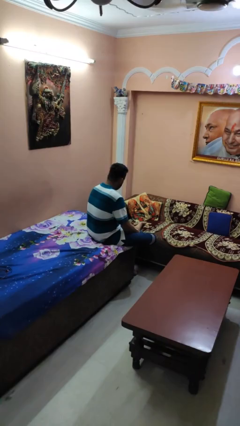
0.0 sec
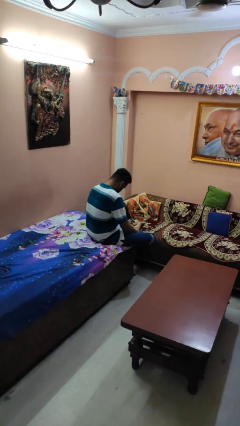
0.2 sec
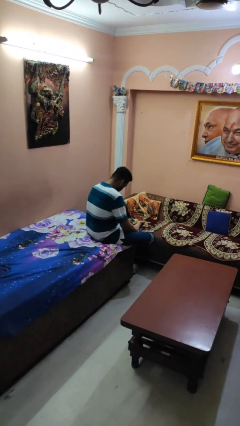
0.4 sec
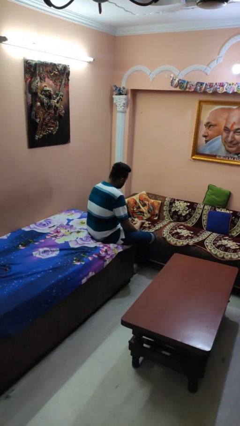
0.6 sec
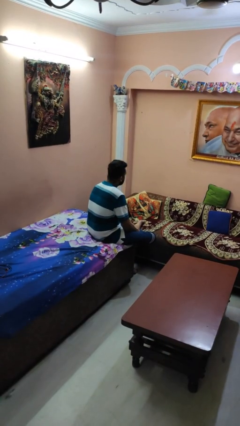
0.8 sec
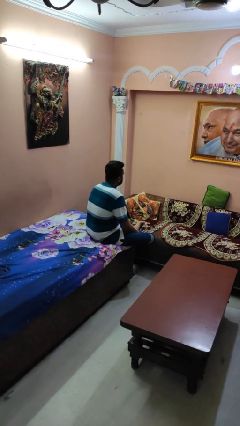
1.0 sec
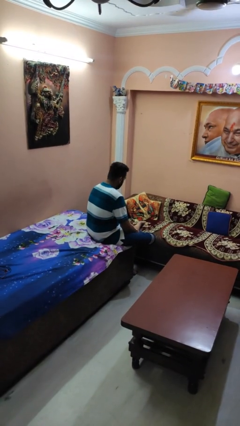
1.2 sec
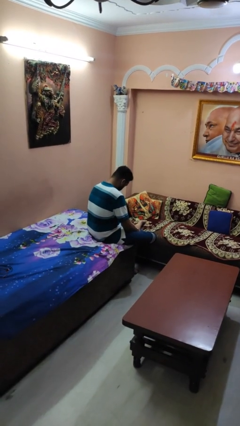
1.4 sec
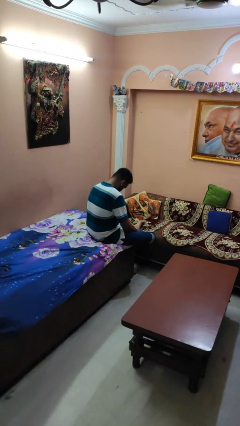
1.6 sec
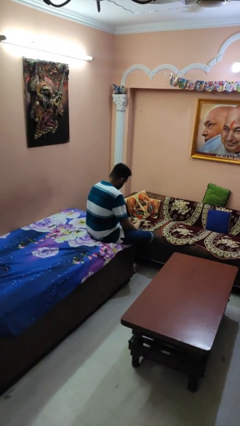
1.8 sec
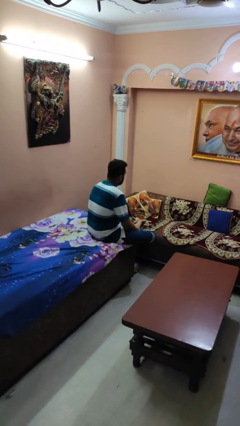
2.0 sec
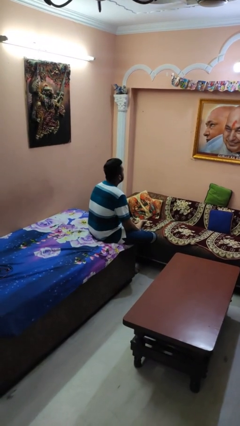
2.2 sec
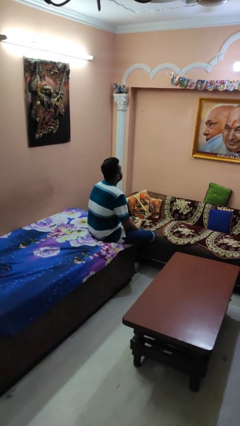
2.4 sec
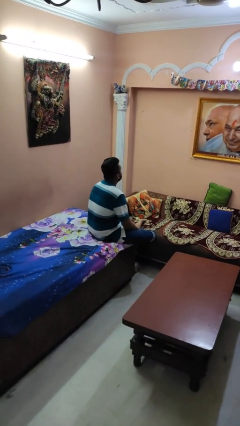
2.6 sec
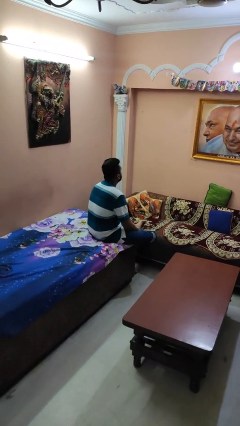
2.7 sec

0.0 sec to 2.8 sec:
person nods head

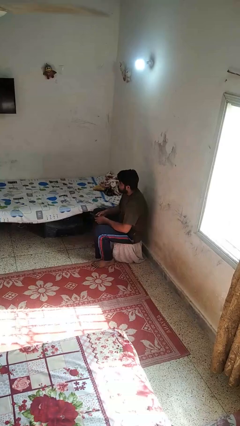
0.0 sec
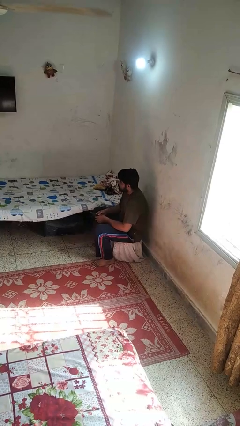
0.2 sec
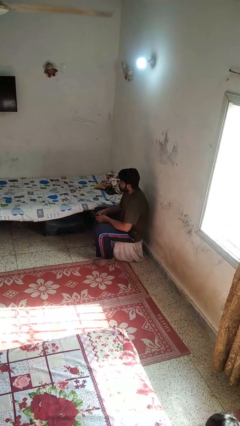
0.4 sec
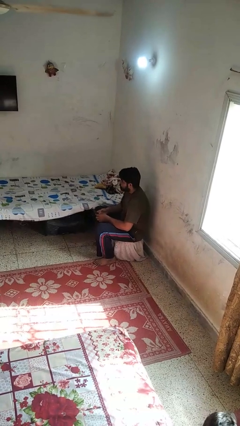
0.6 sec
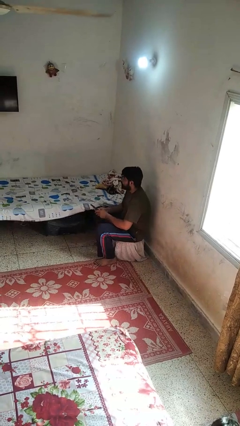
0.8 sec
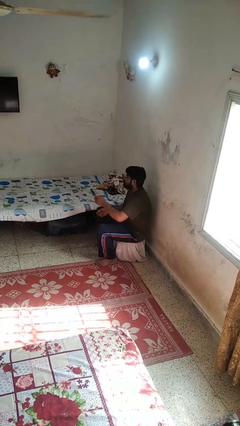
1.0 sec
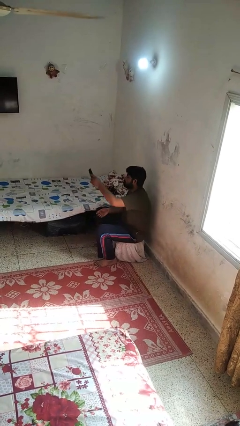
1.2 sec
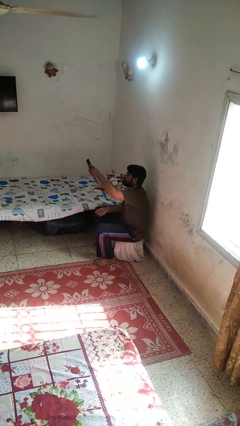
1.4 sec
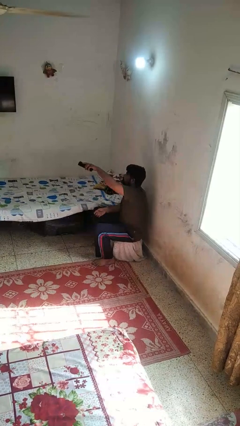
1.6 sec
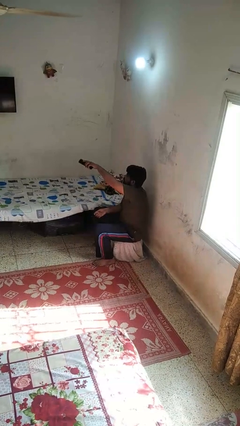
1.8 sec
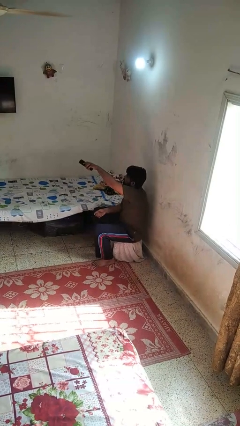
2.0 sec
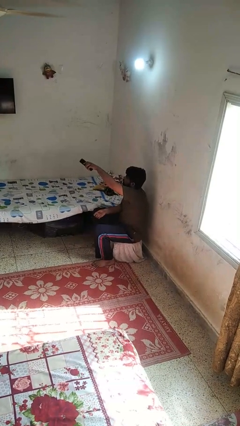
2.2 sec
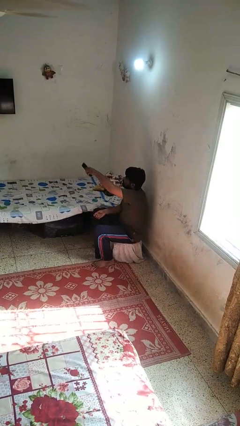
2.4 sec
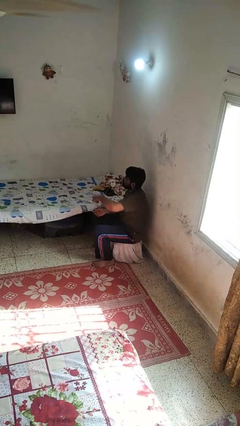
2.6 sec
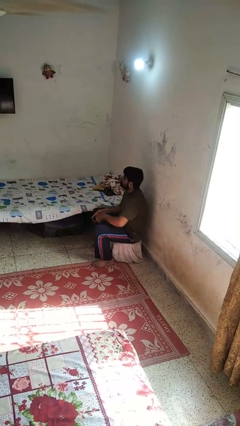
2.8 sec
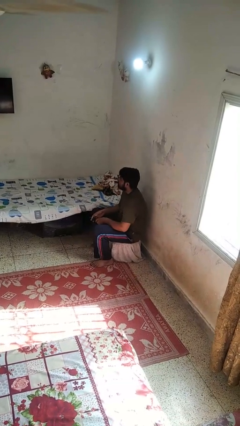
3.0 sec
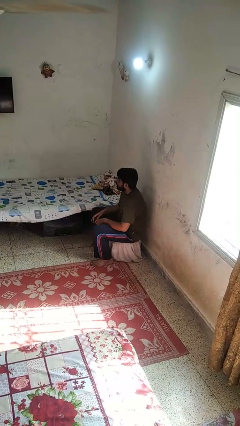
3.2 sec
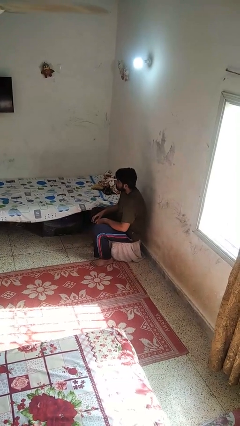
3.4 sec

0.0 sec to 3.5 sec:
person uses television remote

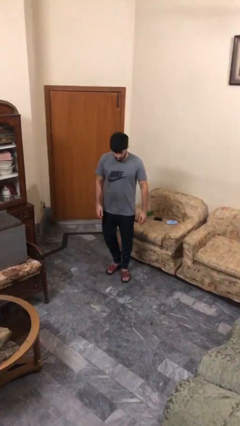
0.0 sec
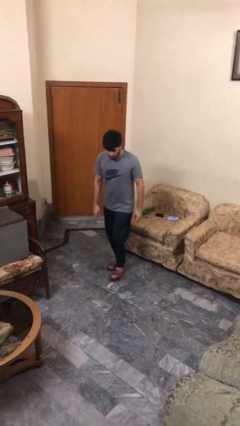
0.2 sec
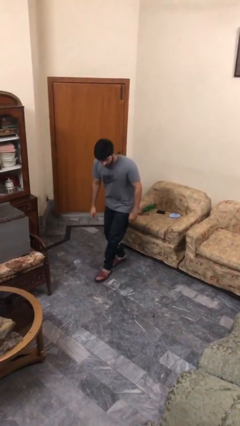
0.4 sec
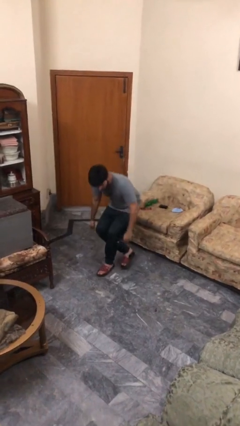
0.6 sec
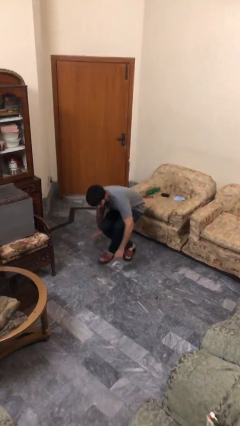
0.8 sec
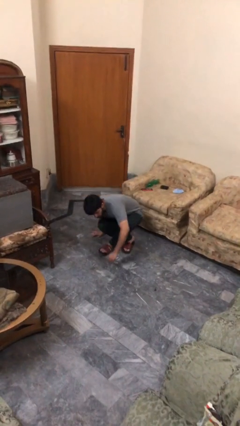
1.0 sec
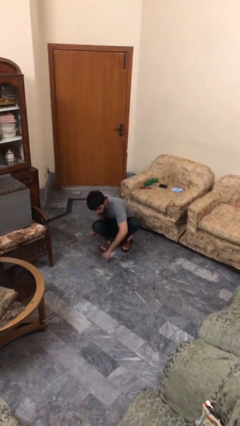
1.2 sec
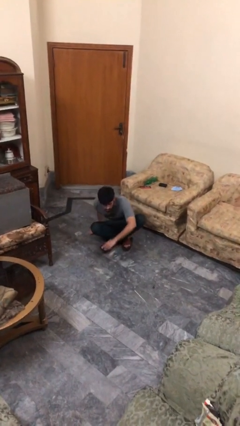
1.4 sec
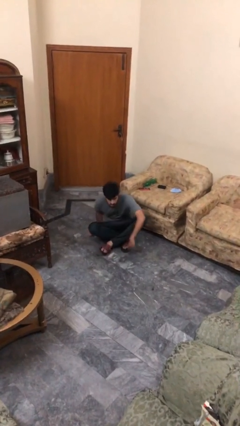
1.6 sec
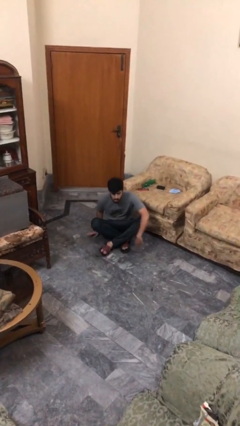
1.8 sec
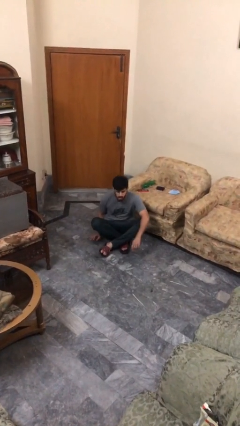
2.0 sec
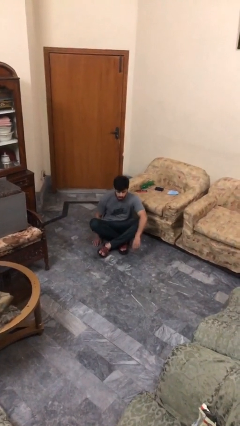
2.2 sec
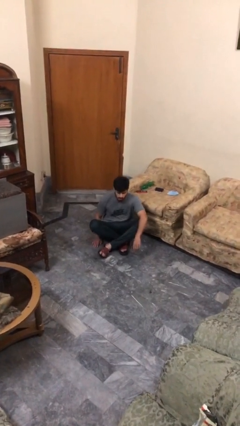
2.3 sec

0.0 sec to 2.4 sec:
person sits crisscross

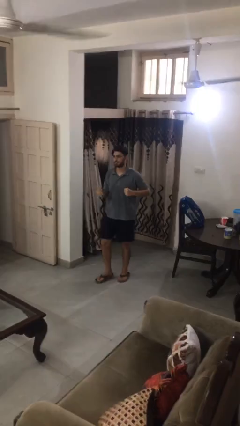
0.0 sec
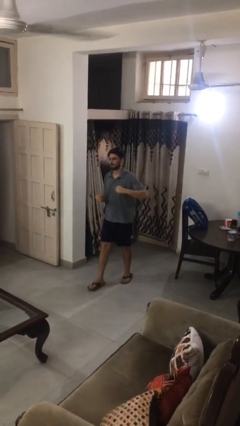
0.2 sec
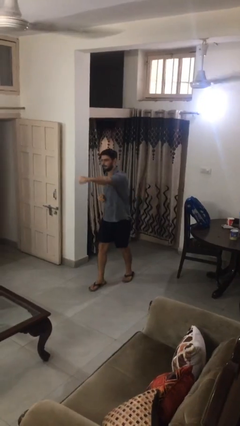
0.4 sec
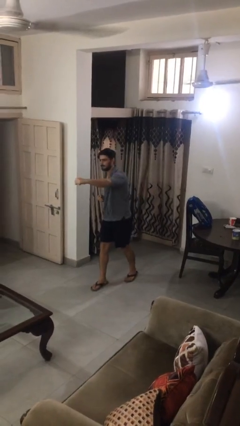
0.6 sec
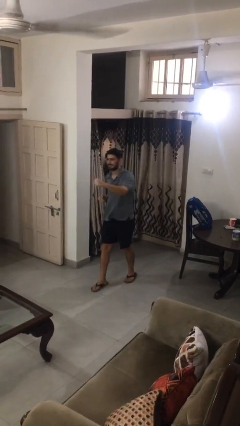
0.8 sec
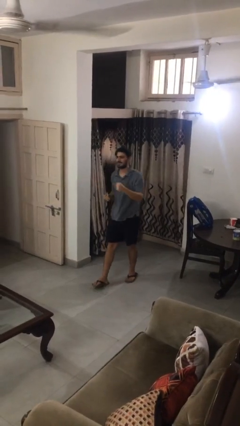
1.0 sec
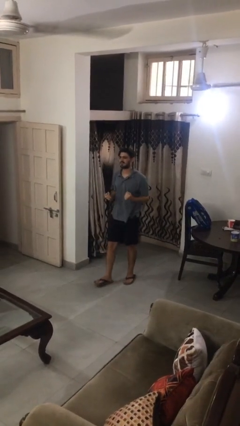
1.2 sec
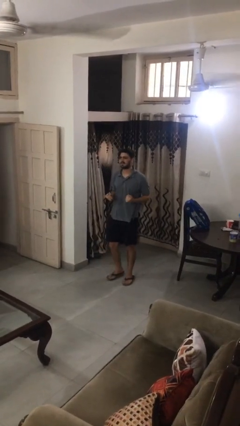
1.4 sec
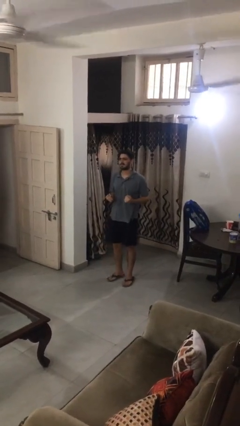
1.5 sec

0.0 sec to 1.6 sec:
person punches

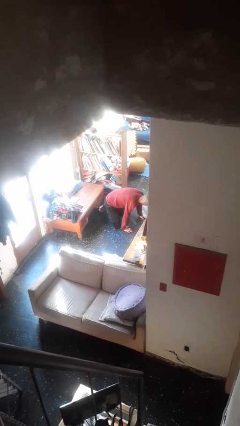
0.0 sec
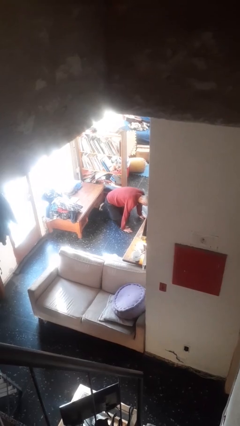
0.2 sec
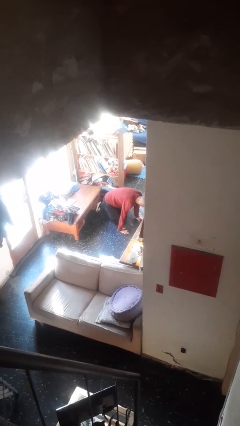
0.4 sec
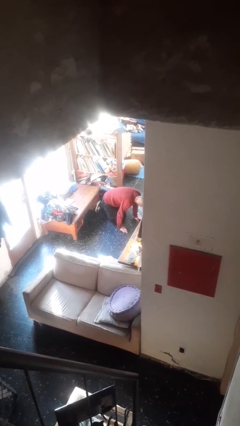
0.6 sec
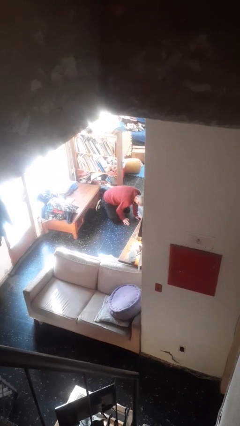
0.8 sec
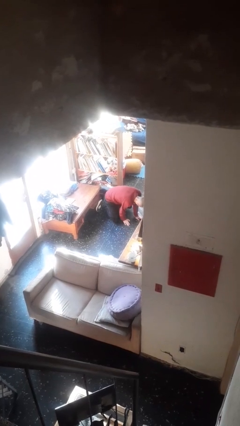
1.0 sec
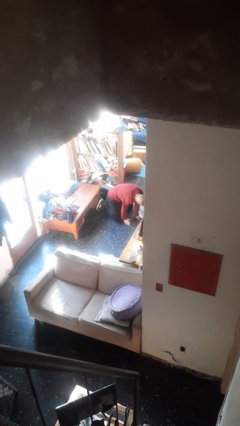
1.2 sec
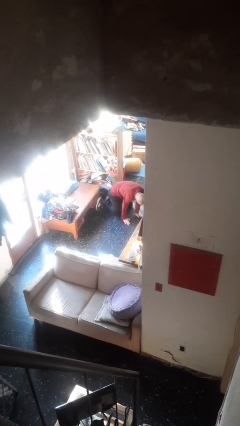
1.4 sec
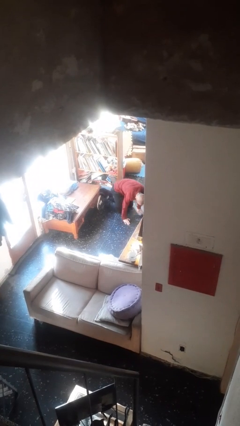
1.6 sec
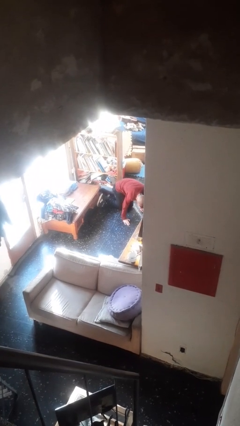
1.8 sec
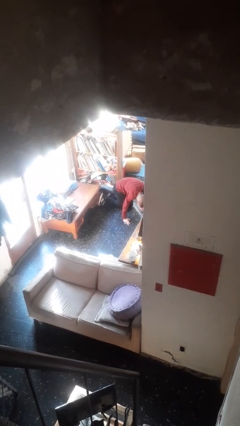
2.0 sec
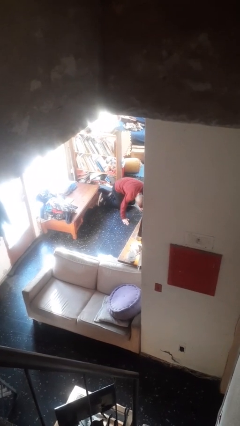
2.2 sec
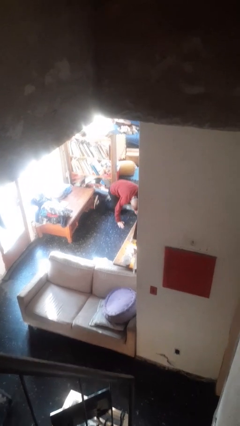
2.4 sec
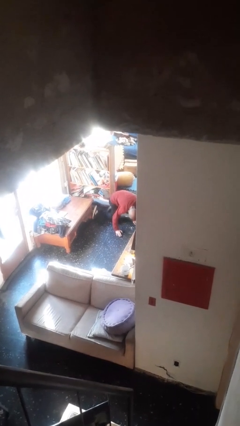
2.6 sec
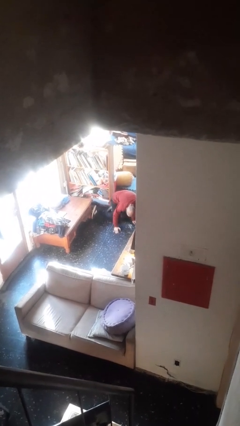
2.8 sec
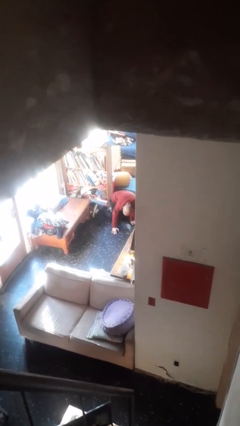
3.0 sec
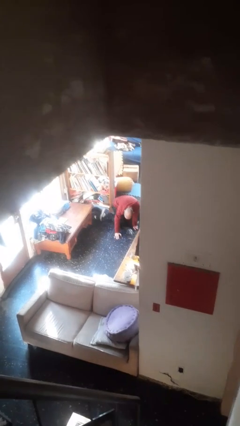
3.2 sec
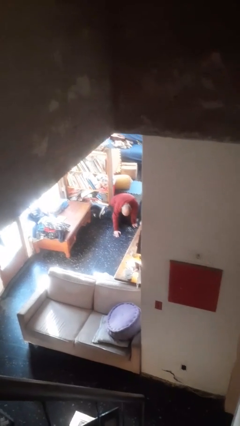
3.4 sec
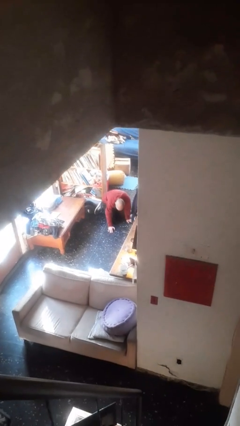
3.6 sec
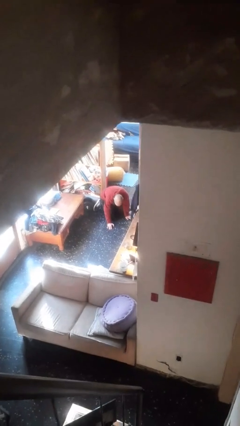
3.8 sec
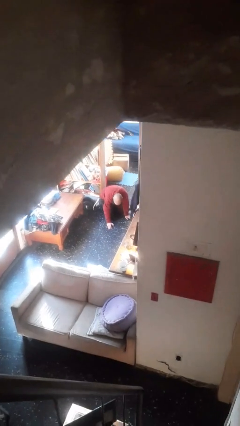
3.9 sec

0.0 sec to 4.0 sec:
person crawls

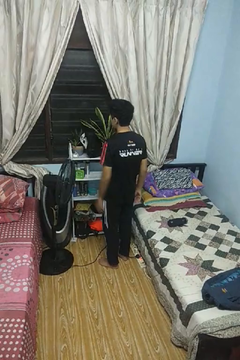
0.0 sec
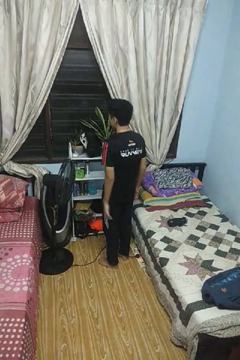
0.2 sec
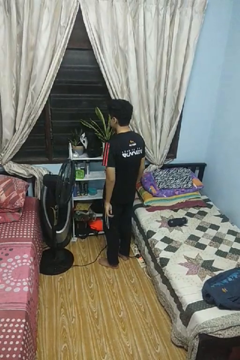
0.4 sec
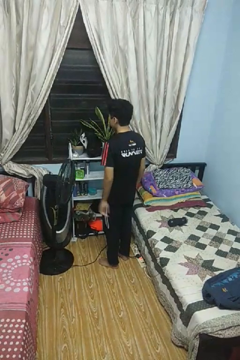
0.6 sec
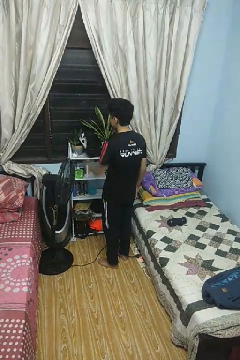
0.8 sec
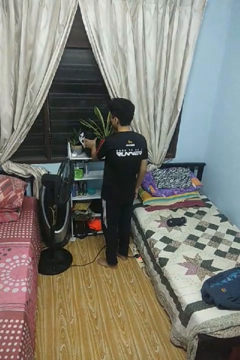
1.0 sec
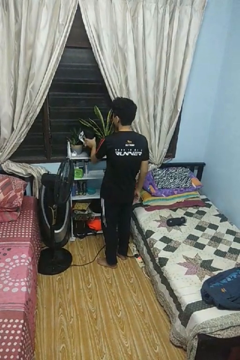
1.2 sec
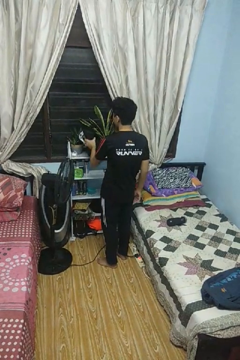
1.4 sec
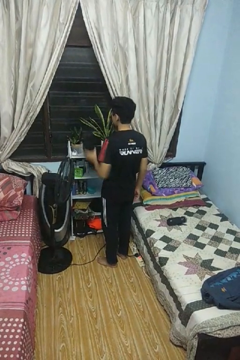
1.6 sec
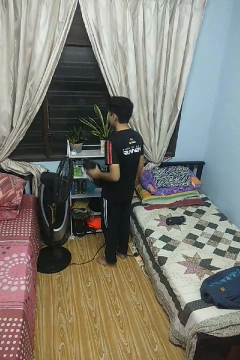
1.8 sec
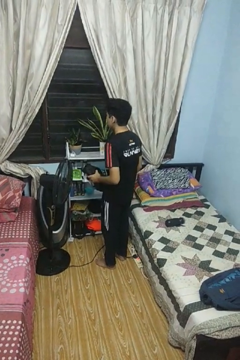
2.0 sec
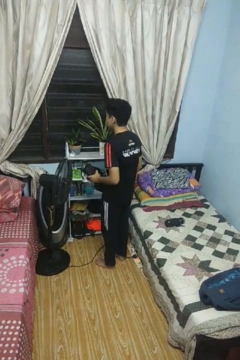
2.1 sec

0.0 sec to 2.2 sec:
person picks up object from countertop

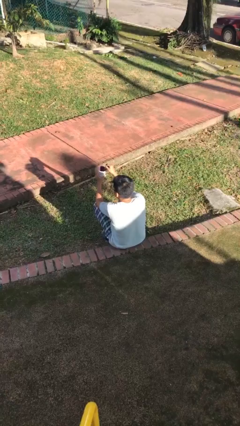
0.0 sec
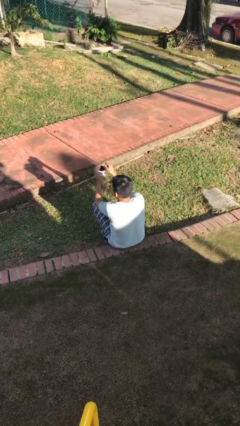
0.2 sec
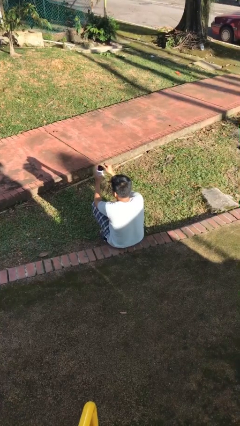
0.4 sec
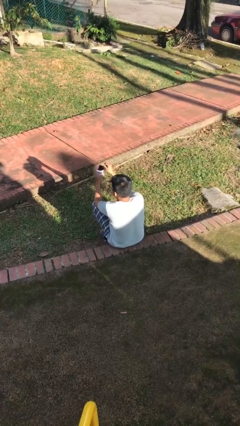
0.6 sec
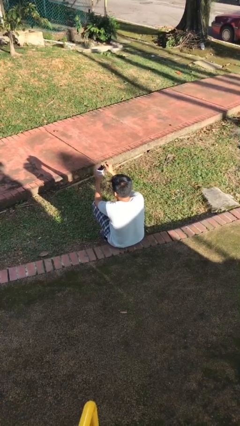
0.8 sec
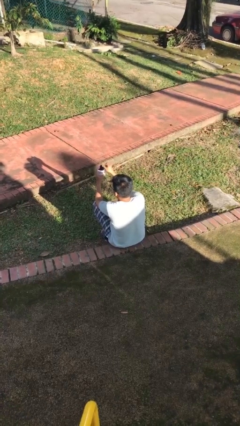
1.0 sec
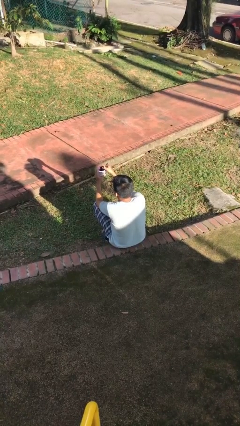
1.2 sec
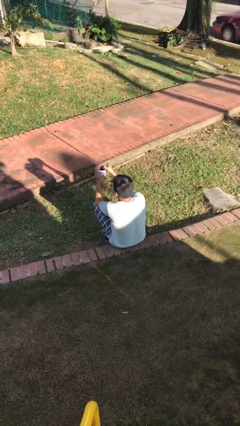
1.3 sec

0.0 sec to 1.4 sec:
person stirs mug

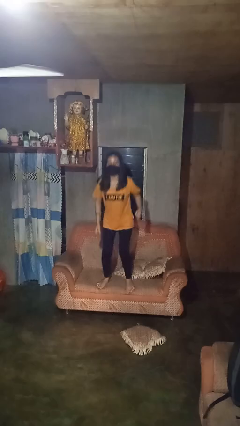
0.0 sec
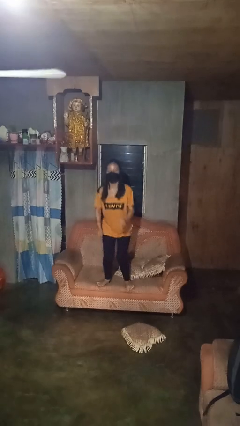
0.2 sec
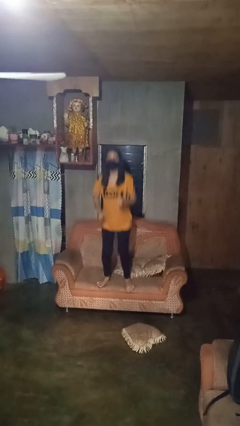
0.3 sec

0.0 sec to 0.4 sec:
person jumps on couch
